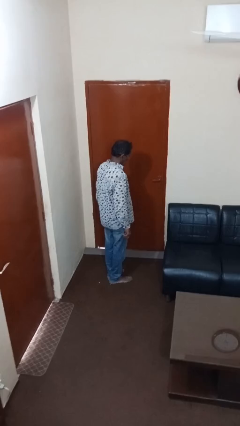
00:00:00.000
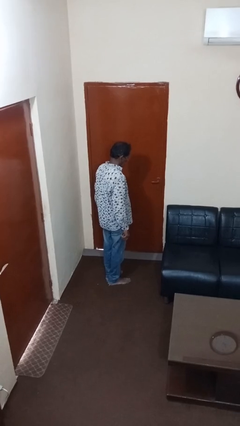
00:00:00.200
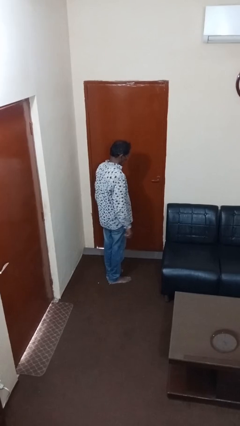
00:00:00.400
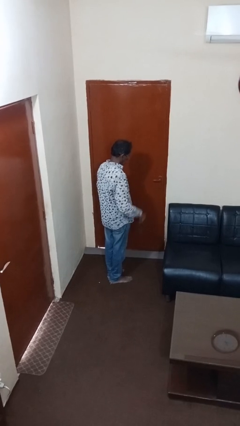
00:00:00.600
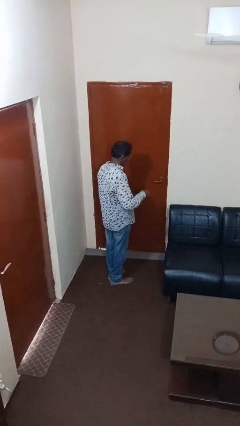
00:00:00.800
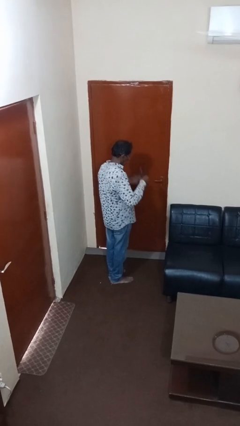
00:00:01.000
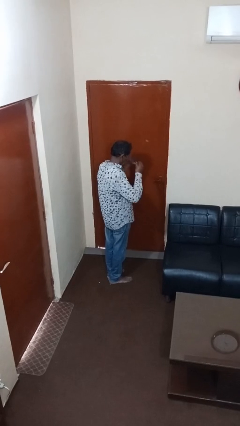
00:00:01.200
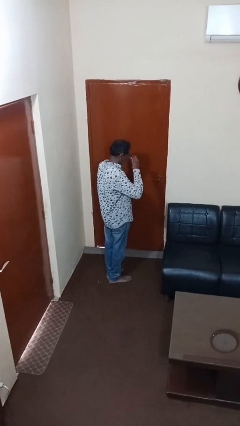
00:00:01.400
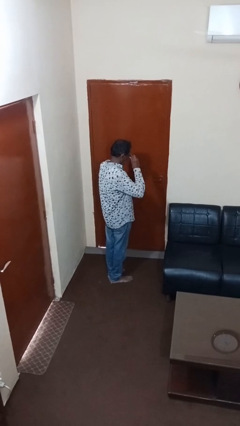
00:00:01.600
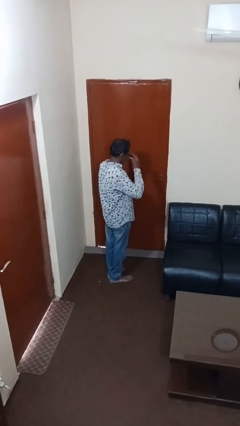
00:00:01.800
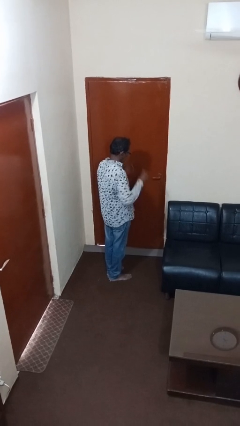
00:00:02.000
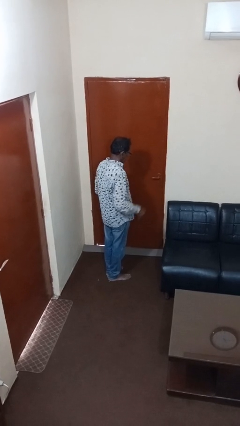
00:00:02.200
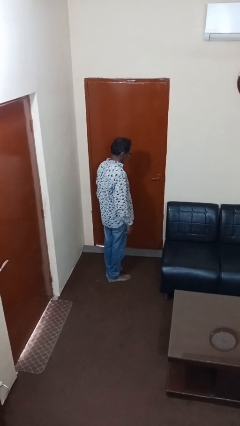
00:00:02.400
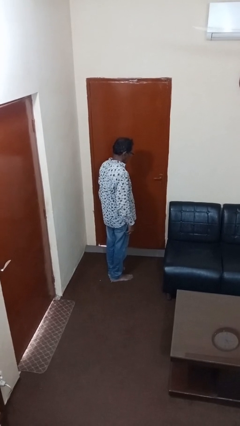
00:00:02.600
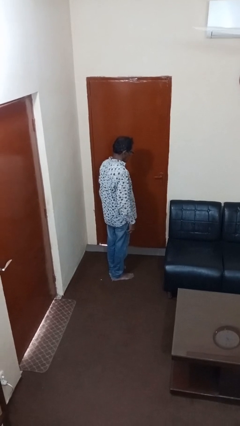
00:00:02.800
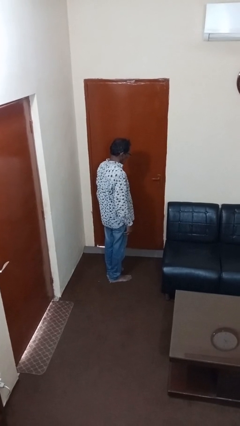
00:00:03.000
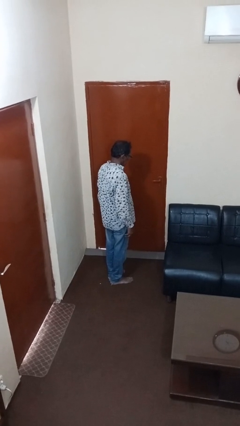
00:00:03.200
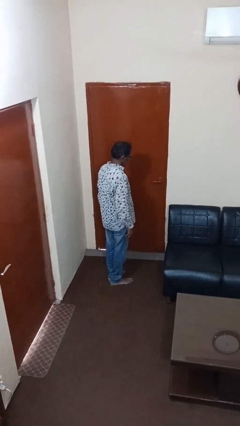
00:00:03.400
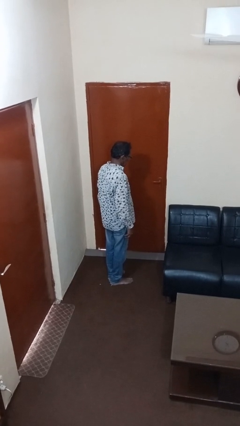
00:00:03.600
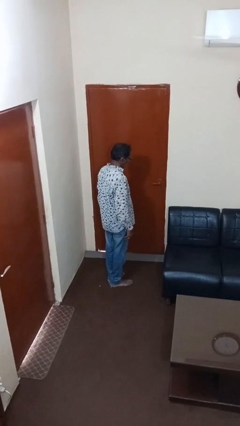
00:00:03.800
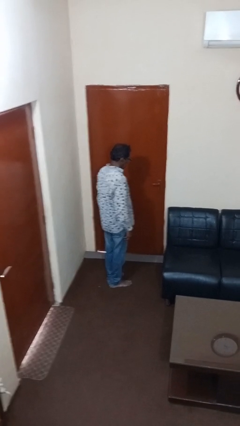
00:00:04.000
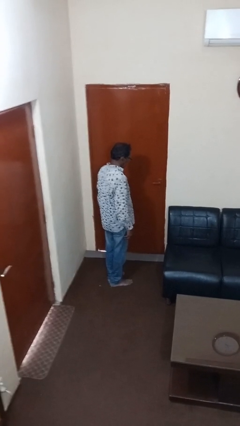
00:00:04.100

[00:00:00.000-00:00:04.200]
person puts on glasses

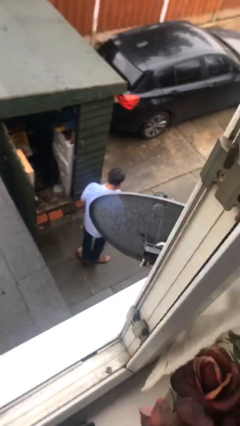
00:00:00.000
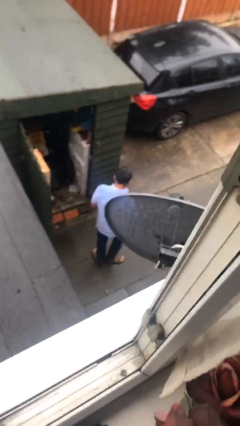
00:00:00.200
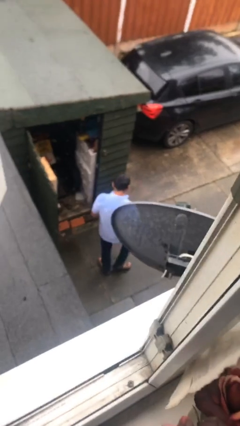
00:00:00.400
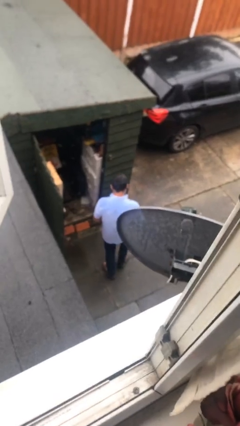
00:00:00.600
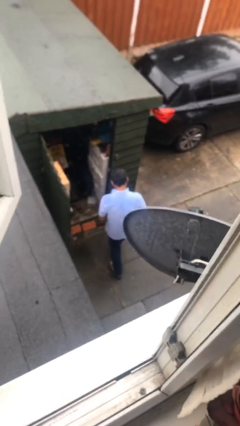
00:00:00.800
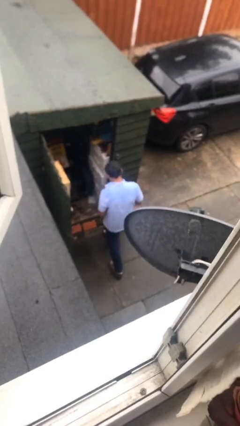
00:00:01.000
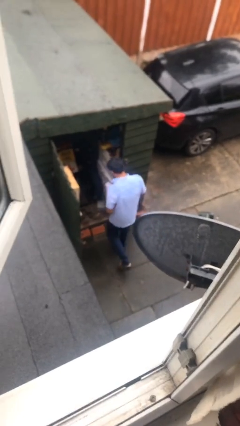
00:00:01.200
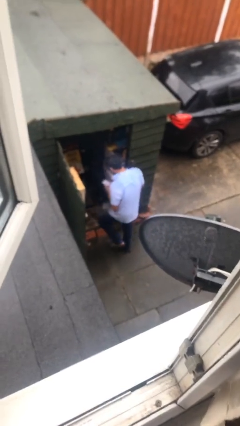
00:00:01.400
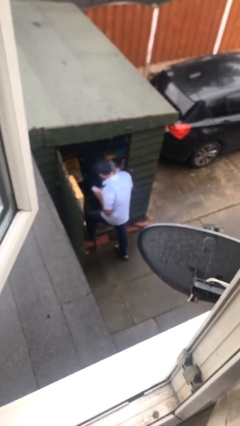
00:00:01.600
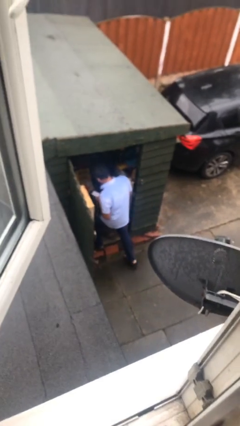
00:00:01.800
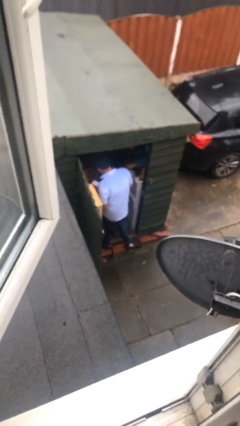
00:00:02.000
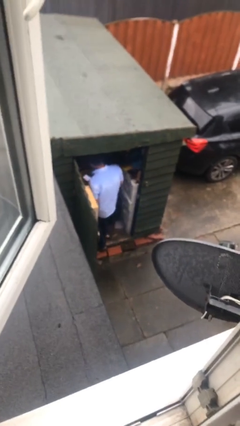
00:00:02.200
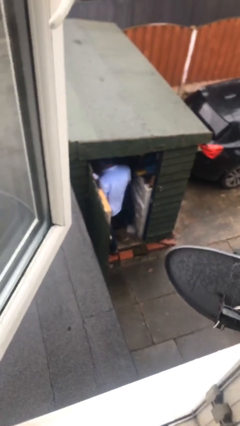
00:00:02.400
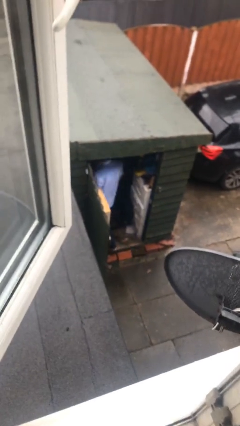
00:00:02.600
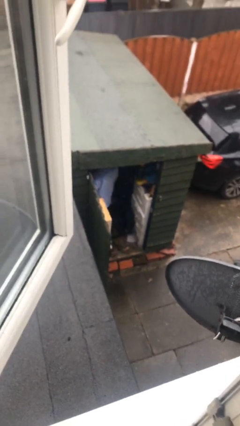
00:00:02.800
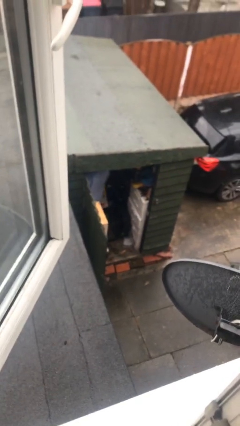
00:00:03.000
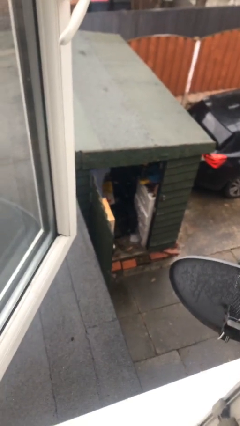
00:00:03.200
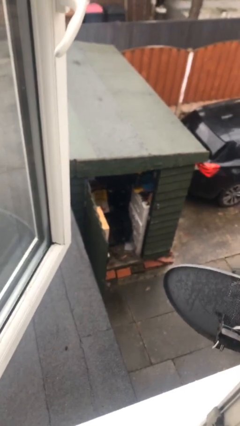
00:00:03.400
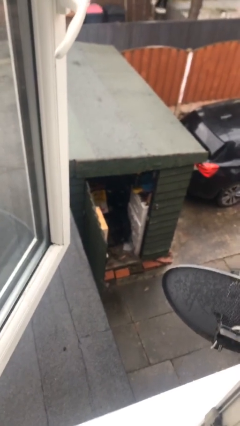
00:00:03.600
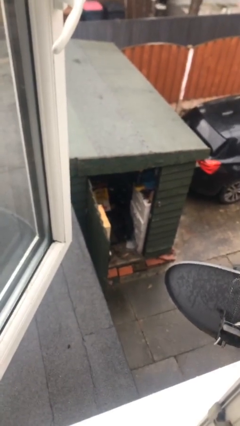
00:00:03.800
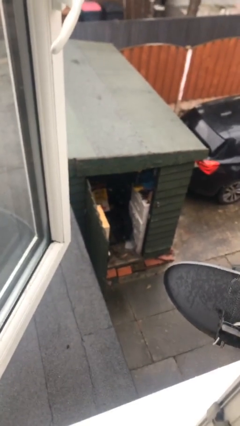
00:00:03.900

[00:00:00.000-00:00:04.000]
person exits scene through structure

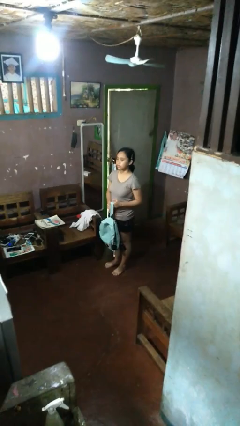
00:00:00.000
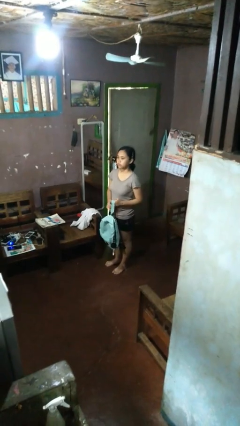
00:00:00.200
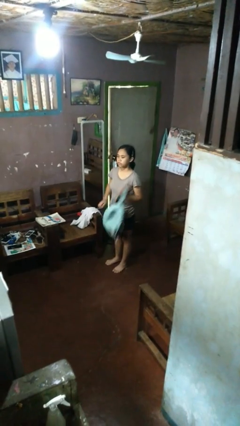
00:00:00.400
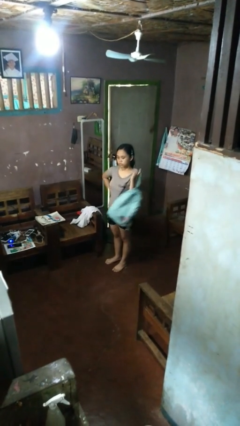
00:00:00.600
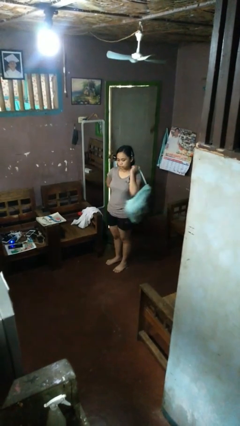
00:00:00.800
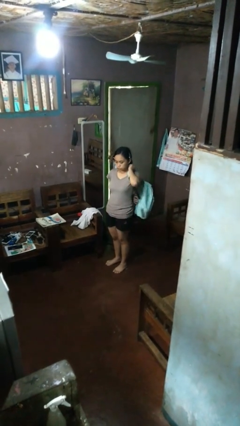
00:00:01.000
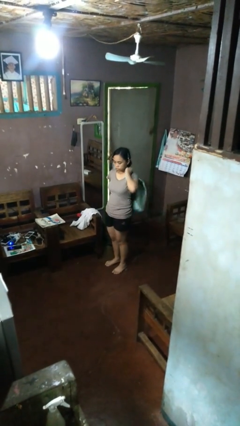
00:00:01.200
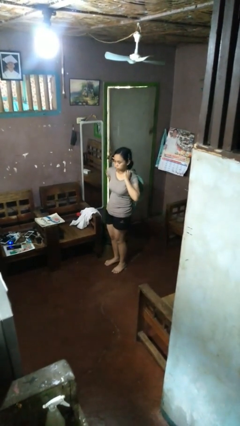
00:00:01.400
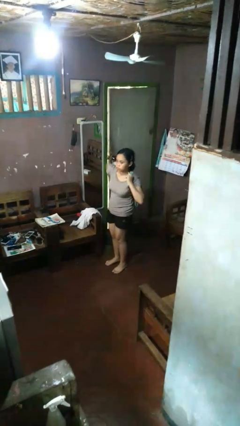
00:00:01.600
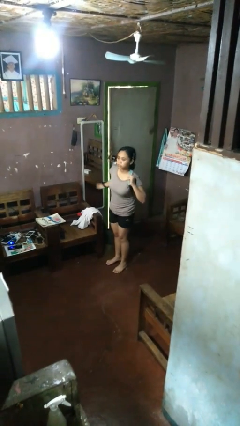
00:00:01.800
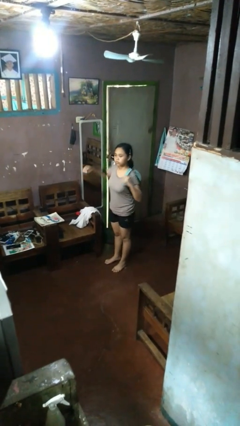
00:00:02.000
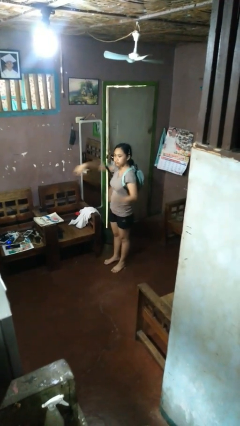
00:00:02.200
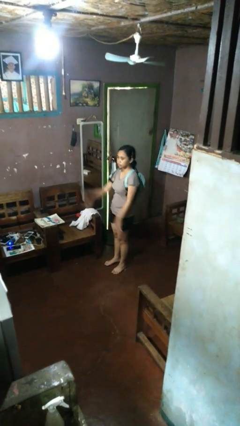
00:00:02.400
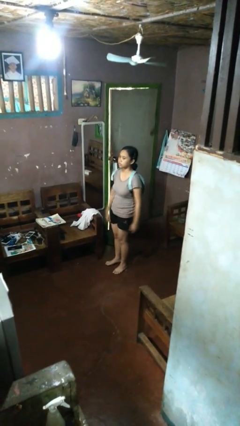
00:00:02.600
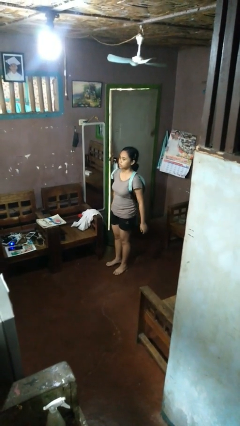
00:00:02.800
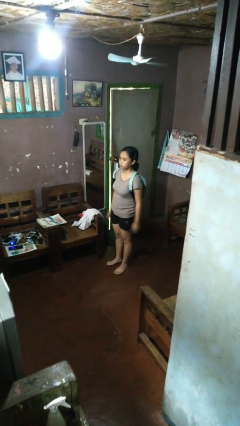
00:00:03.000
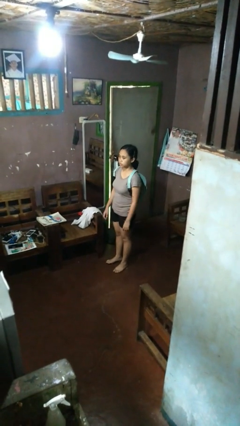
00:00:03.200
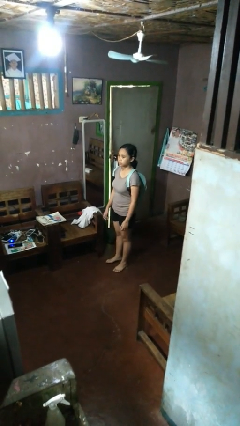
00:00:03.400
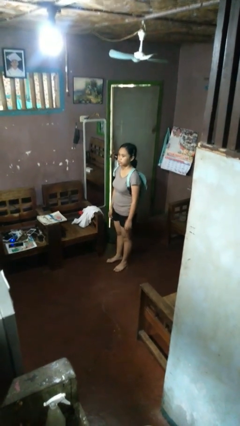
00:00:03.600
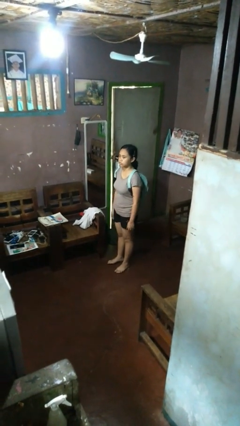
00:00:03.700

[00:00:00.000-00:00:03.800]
person puts on backpack

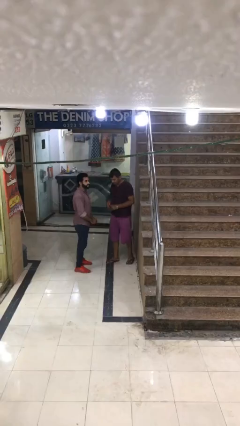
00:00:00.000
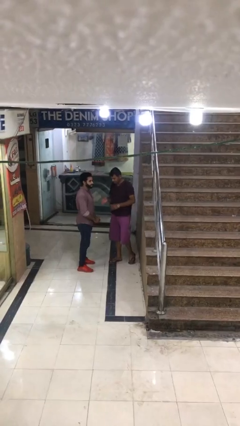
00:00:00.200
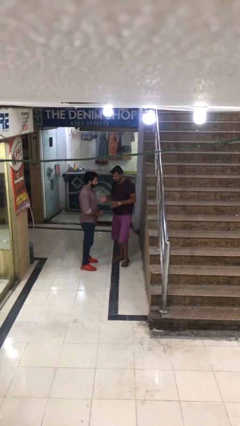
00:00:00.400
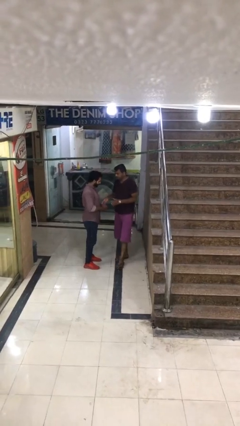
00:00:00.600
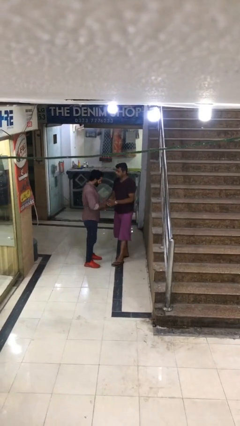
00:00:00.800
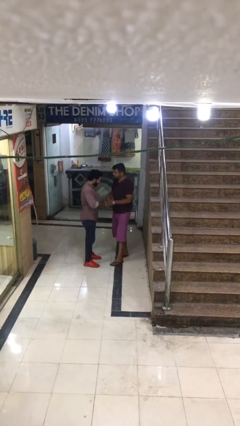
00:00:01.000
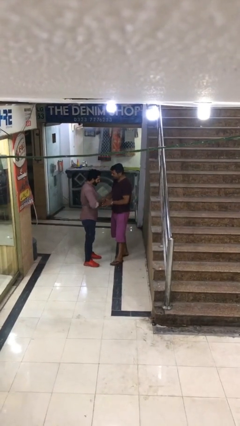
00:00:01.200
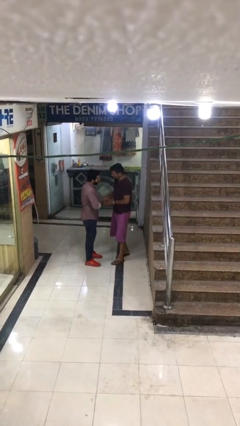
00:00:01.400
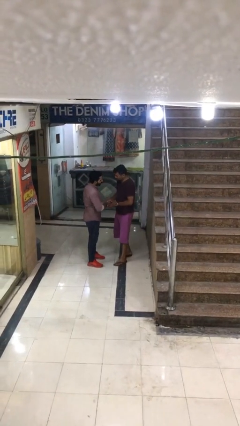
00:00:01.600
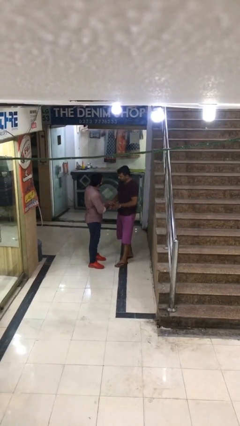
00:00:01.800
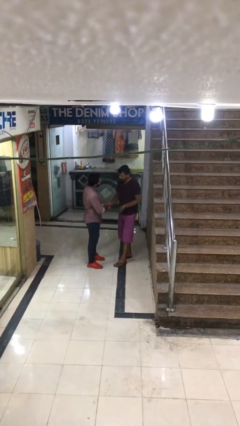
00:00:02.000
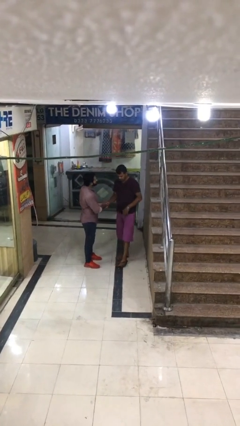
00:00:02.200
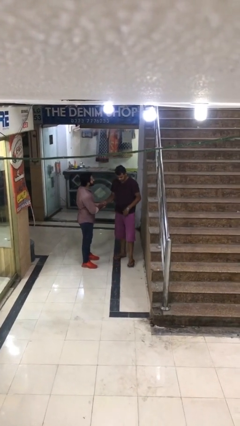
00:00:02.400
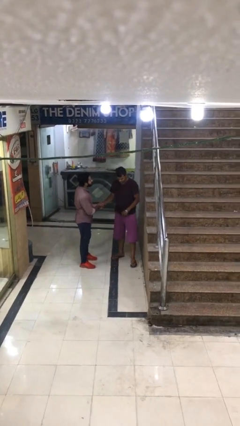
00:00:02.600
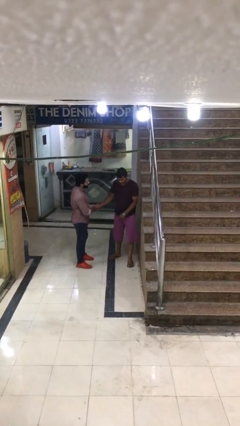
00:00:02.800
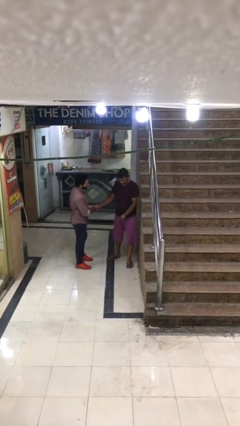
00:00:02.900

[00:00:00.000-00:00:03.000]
person shakes hand

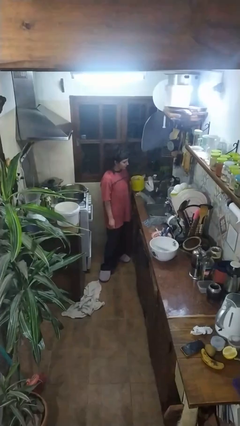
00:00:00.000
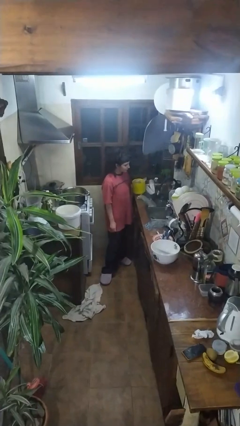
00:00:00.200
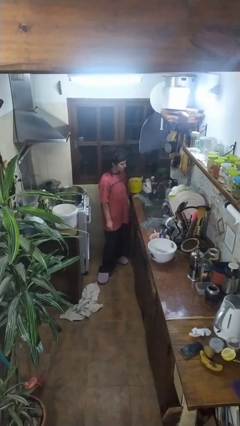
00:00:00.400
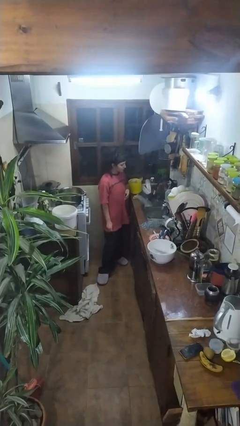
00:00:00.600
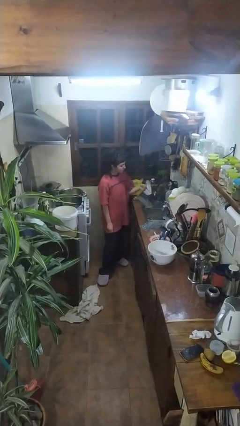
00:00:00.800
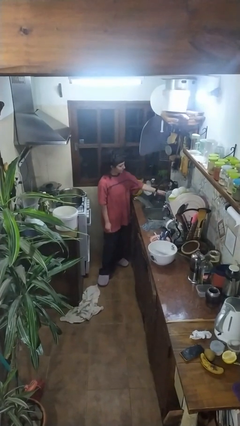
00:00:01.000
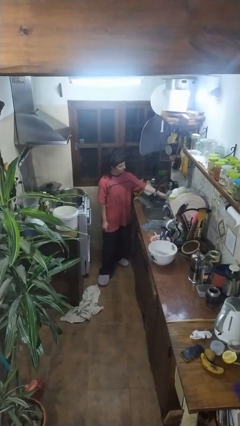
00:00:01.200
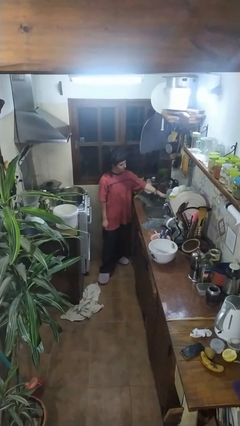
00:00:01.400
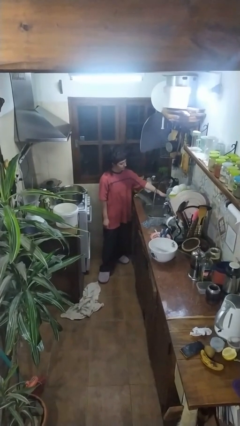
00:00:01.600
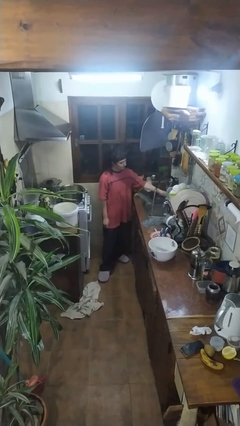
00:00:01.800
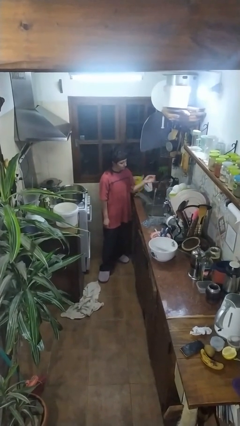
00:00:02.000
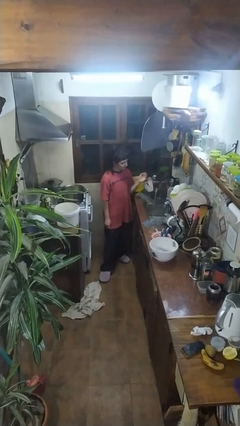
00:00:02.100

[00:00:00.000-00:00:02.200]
person turns on faucet

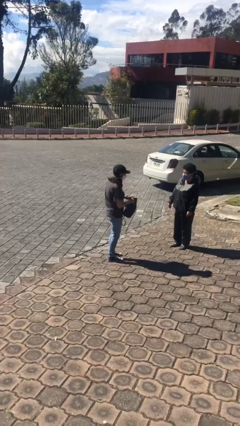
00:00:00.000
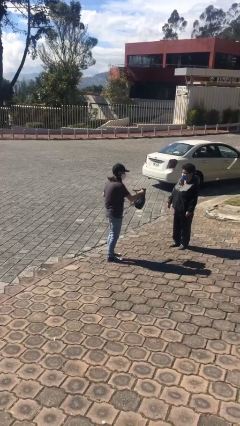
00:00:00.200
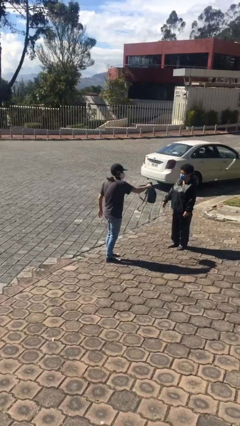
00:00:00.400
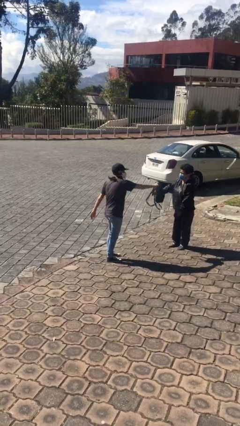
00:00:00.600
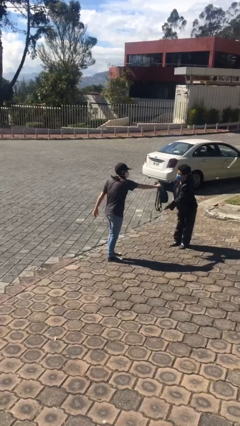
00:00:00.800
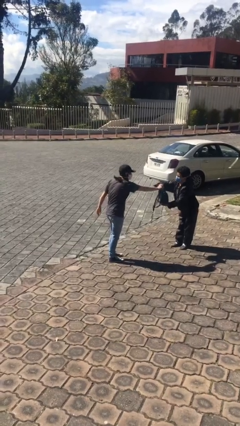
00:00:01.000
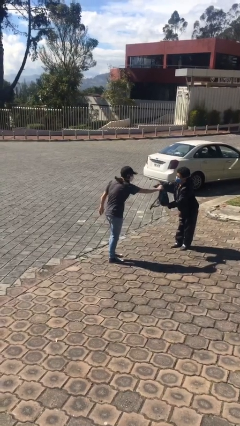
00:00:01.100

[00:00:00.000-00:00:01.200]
person transfers object to person
